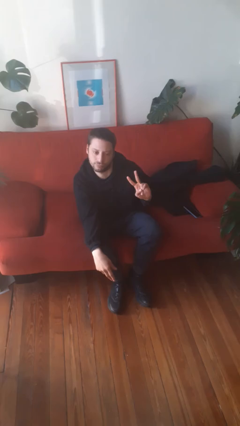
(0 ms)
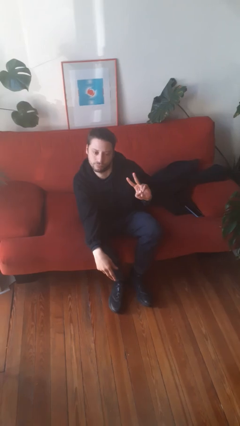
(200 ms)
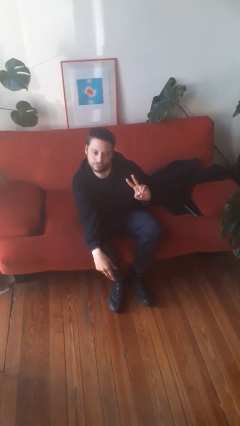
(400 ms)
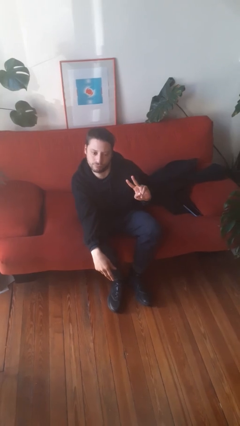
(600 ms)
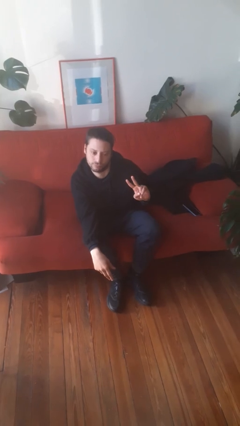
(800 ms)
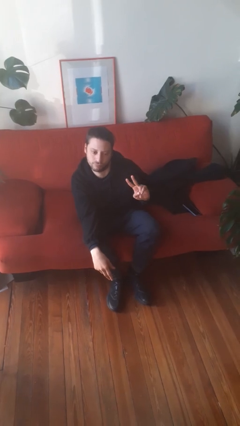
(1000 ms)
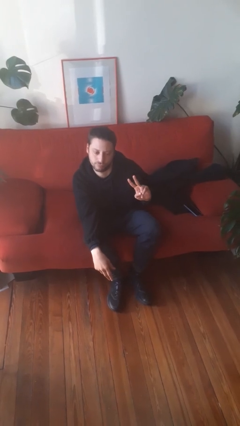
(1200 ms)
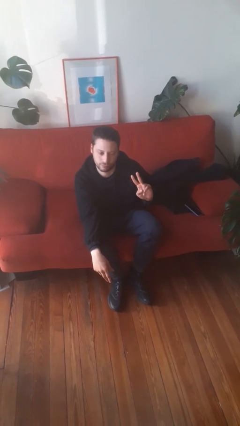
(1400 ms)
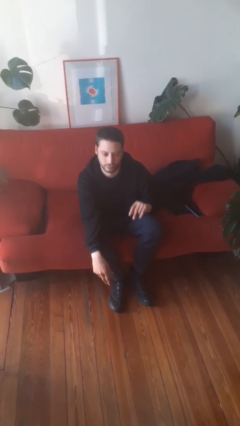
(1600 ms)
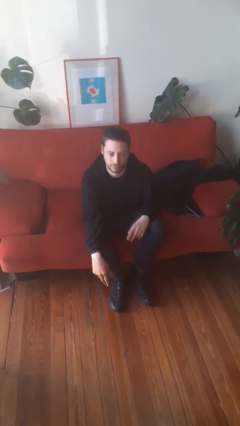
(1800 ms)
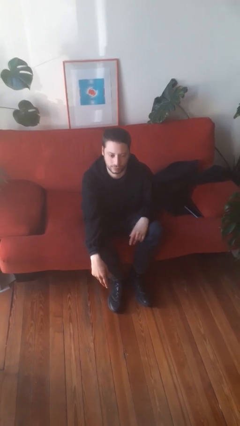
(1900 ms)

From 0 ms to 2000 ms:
person gestures peace

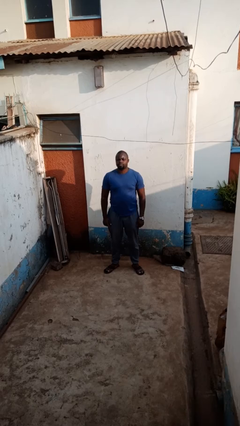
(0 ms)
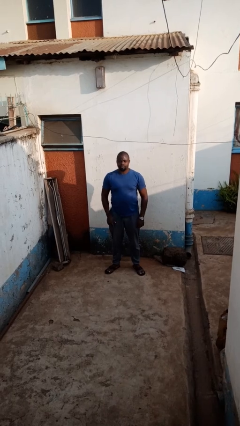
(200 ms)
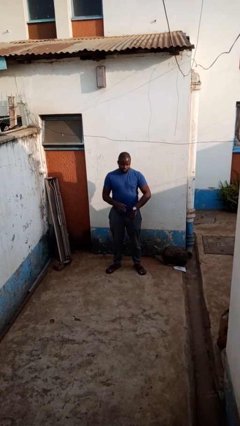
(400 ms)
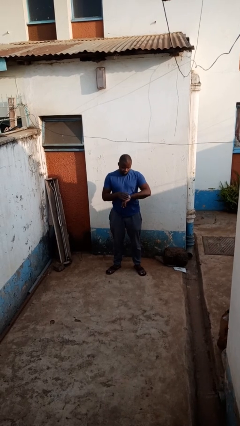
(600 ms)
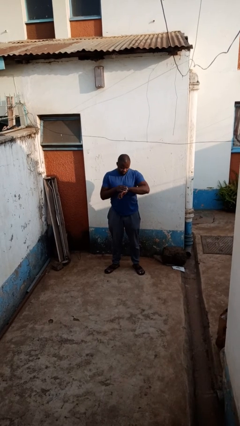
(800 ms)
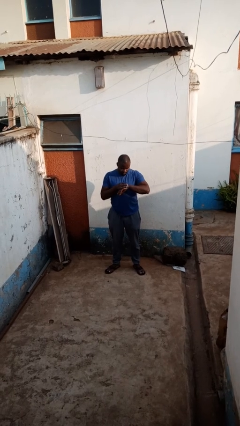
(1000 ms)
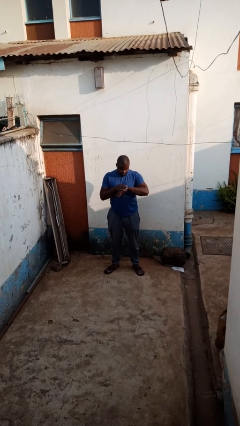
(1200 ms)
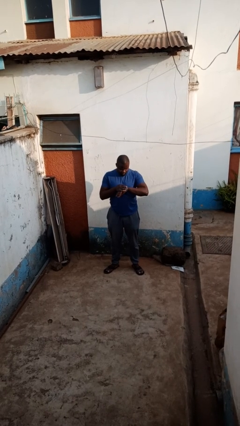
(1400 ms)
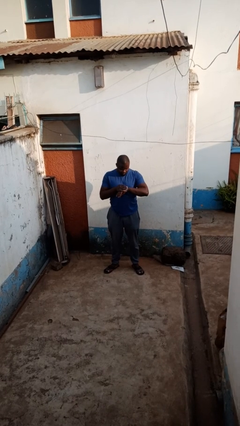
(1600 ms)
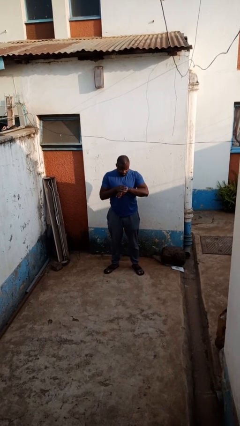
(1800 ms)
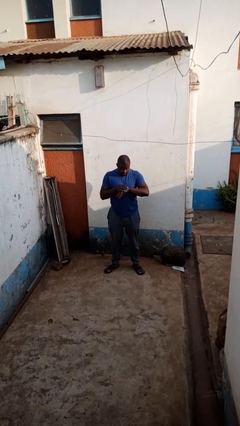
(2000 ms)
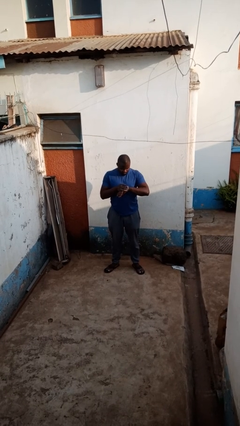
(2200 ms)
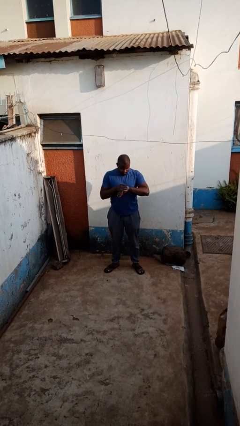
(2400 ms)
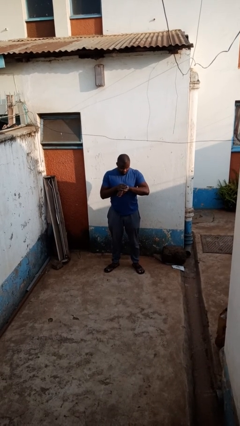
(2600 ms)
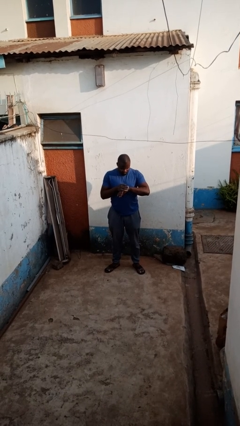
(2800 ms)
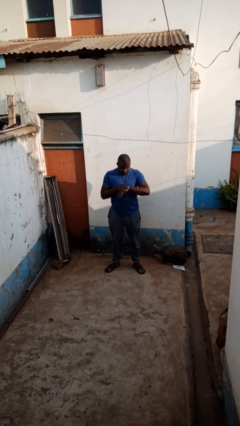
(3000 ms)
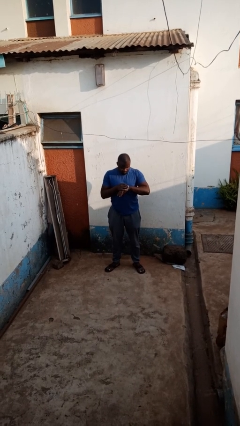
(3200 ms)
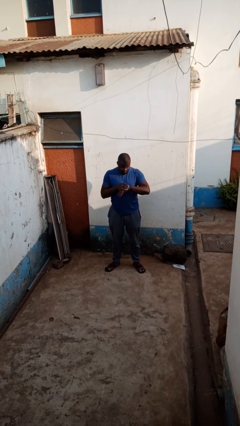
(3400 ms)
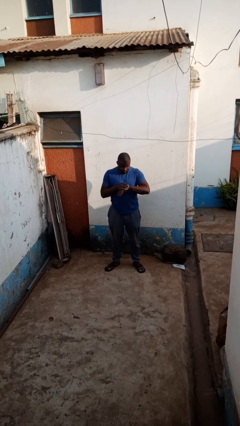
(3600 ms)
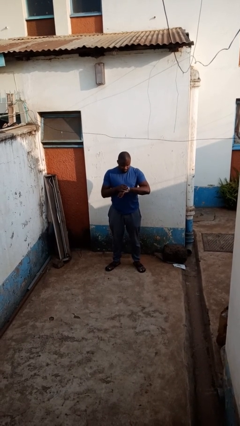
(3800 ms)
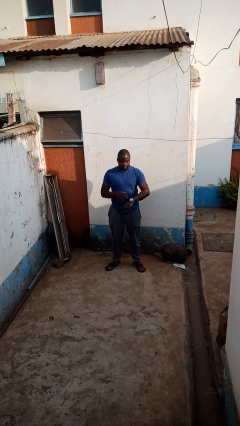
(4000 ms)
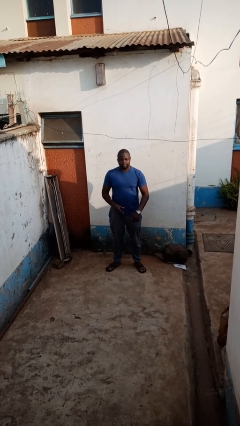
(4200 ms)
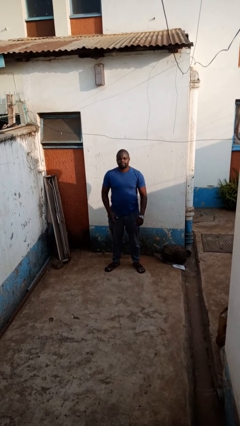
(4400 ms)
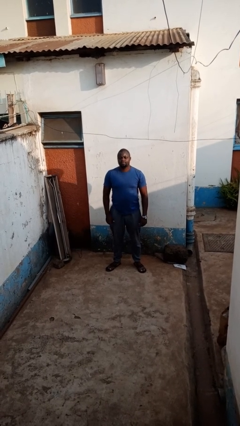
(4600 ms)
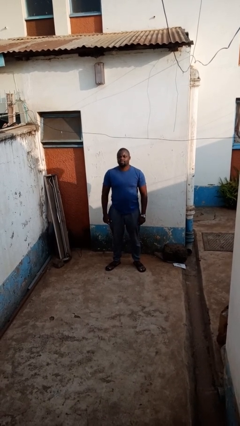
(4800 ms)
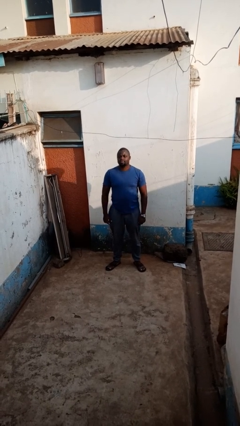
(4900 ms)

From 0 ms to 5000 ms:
person looks at wristwatch

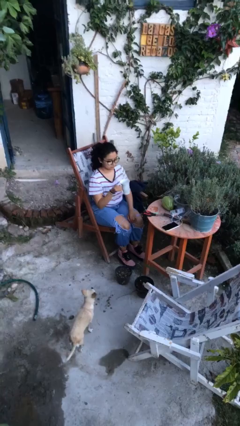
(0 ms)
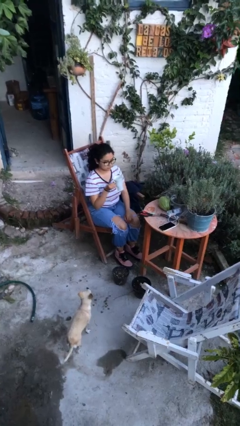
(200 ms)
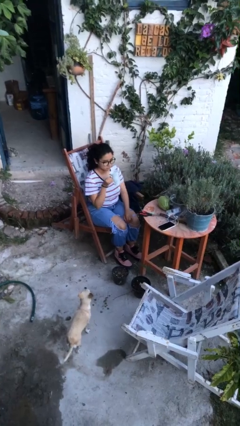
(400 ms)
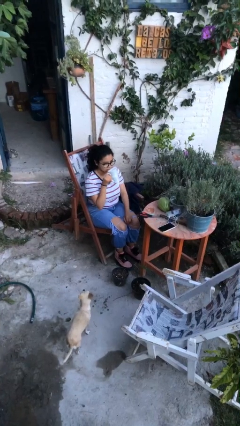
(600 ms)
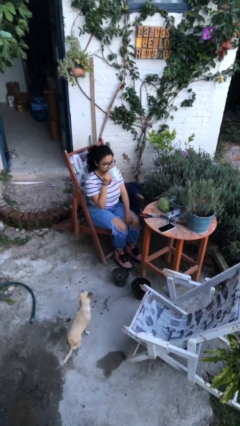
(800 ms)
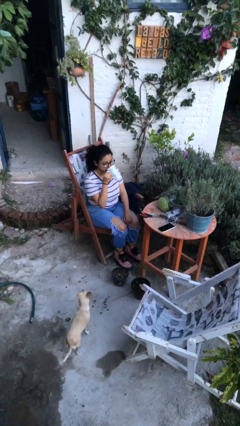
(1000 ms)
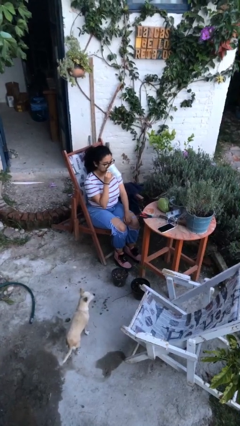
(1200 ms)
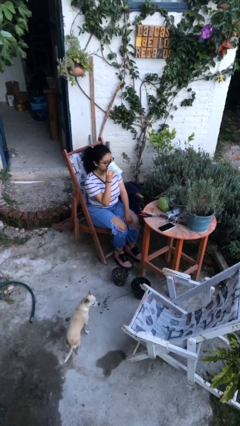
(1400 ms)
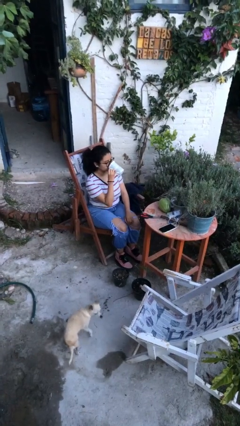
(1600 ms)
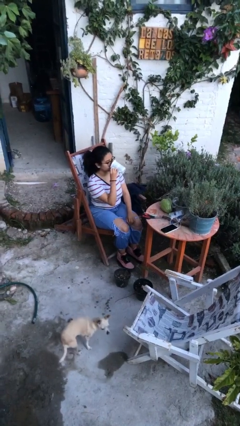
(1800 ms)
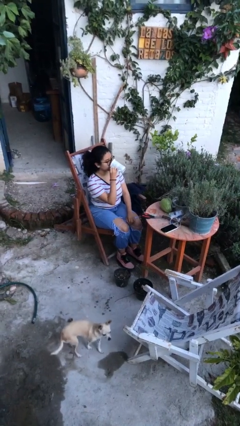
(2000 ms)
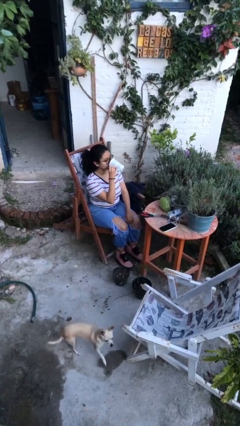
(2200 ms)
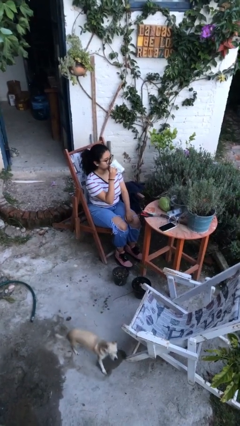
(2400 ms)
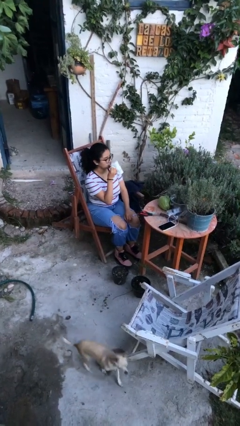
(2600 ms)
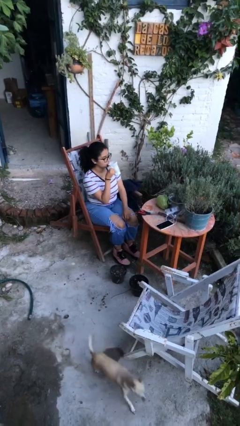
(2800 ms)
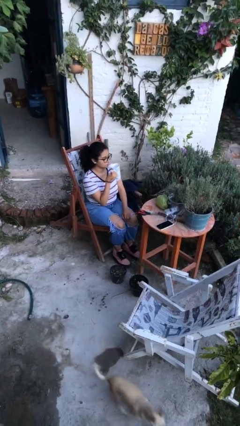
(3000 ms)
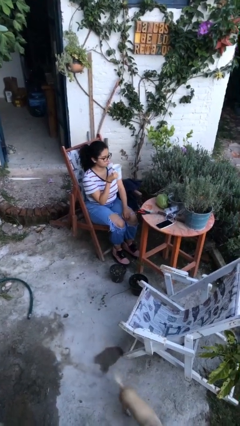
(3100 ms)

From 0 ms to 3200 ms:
person drinks from mug

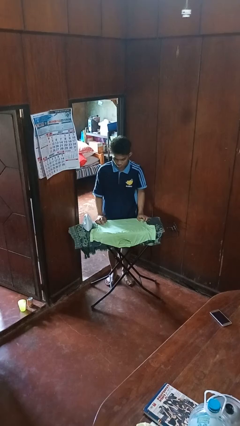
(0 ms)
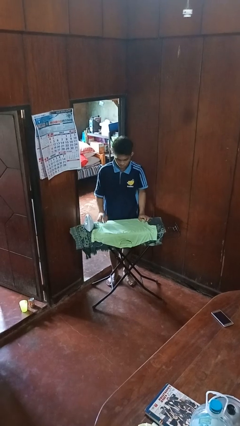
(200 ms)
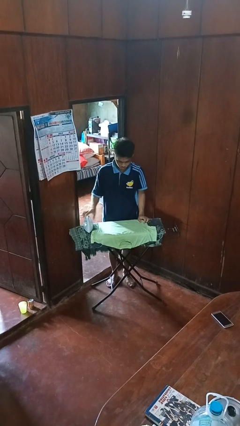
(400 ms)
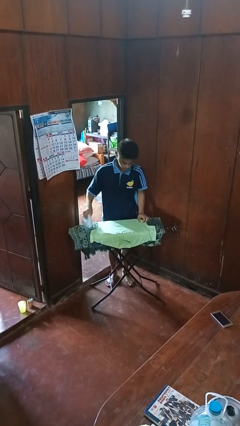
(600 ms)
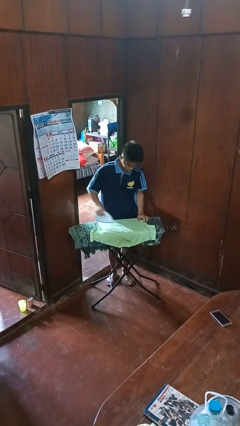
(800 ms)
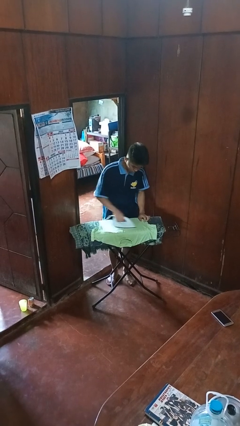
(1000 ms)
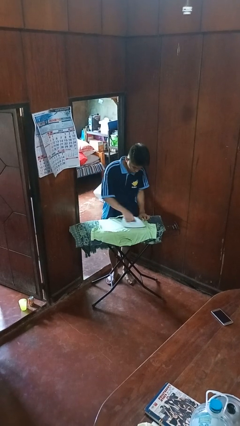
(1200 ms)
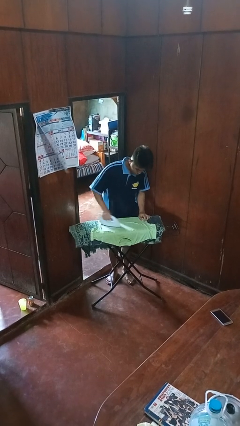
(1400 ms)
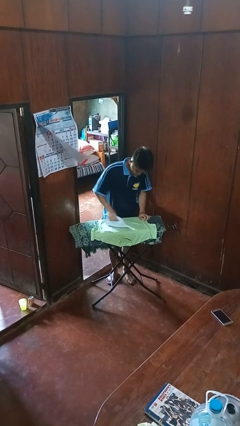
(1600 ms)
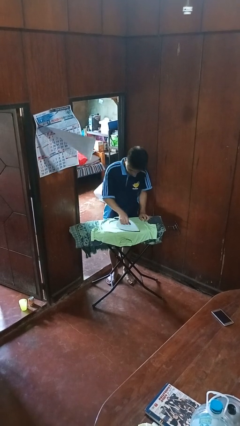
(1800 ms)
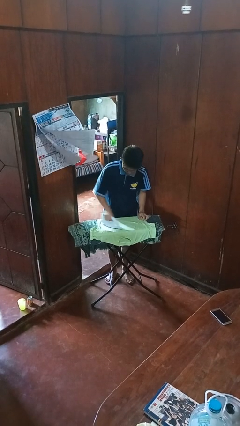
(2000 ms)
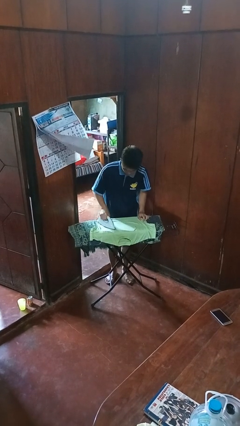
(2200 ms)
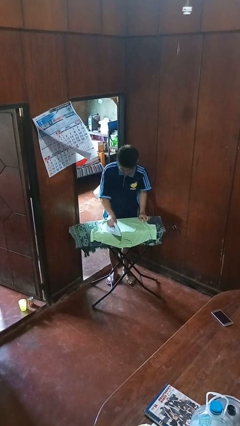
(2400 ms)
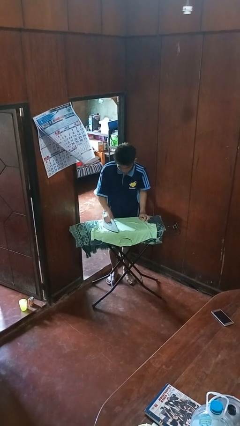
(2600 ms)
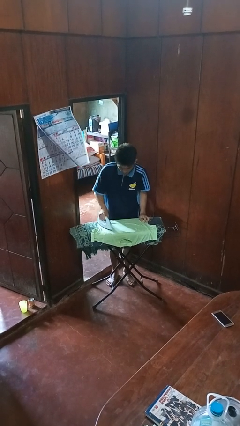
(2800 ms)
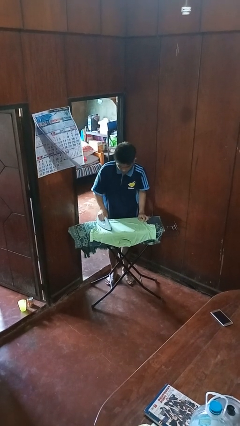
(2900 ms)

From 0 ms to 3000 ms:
person irons clothes

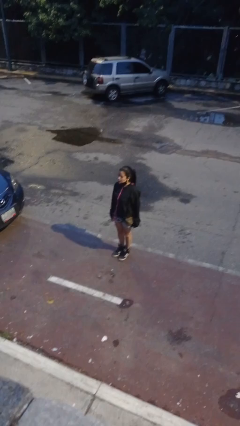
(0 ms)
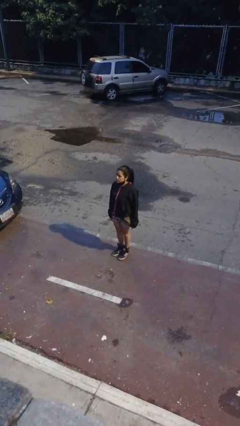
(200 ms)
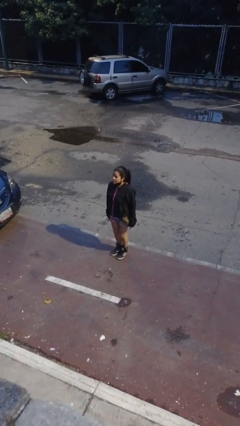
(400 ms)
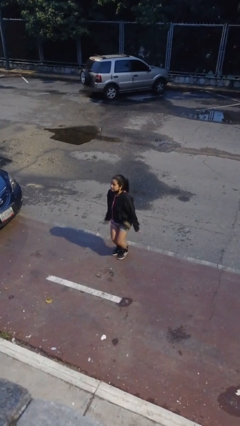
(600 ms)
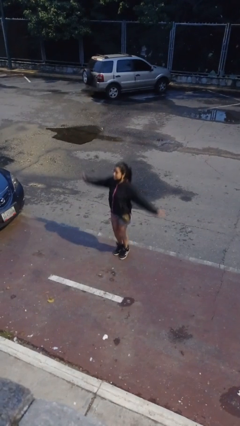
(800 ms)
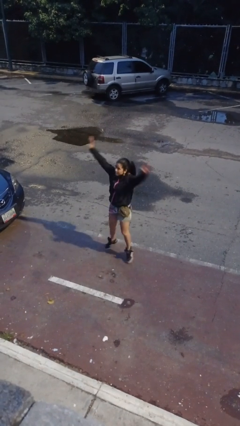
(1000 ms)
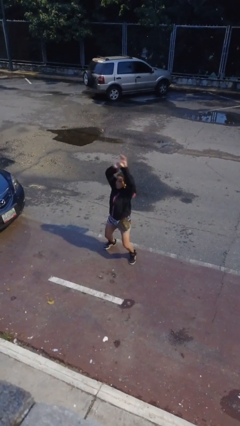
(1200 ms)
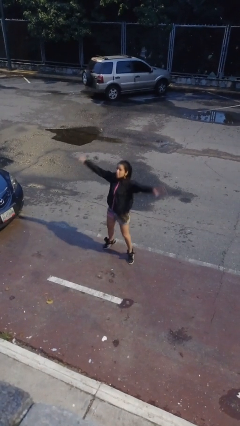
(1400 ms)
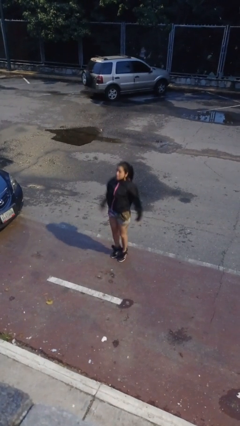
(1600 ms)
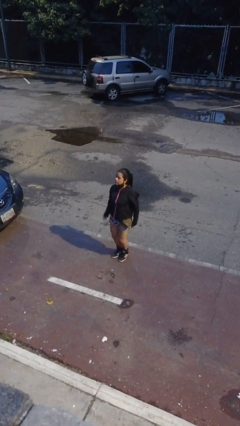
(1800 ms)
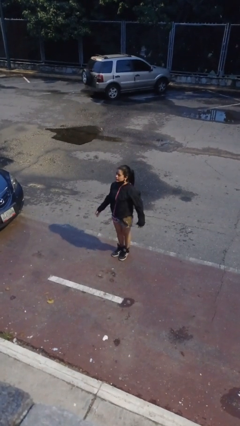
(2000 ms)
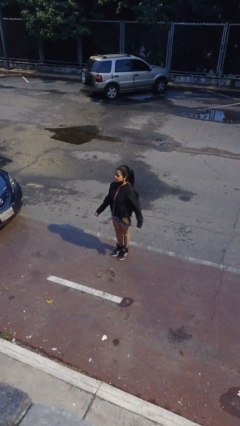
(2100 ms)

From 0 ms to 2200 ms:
person exercises with jumping jacks

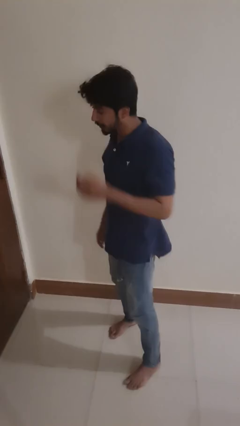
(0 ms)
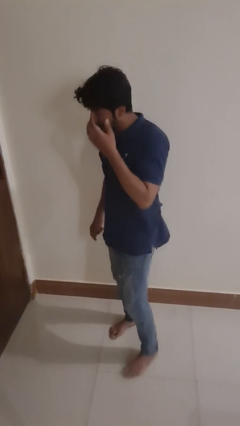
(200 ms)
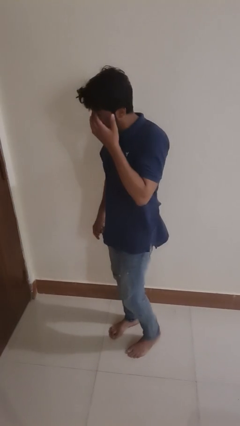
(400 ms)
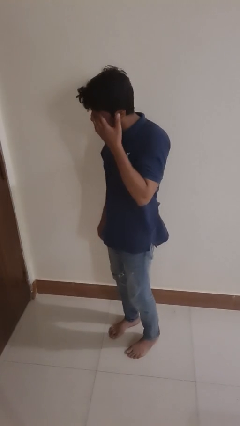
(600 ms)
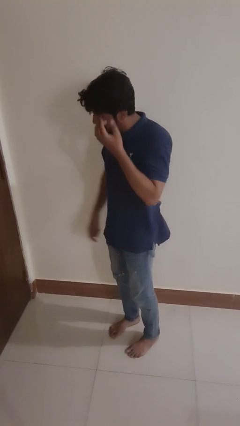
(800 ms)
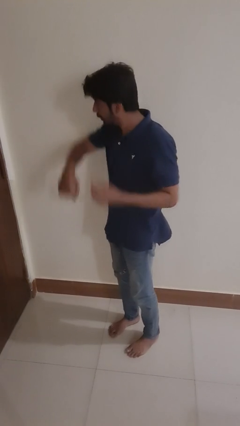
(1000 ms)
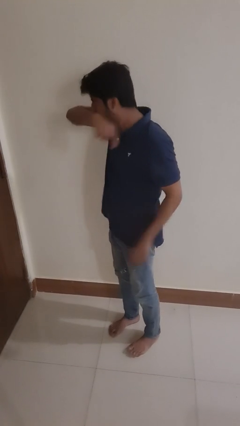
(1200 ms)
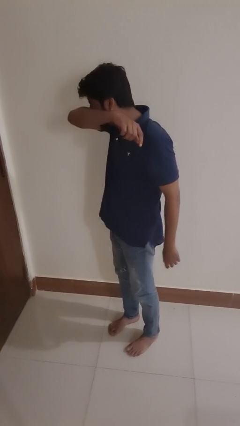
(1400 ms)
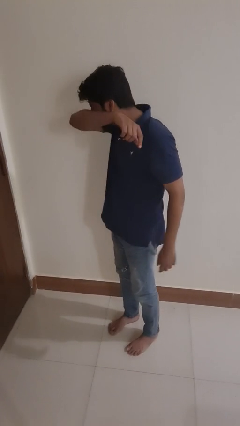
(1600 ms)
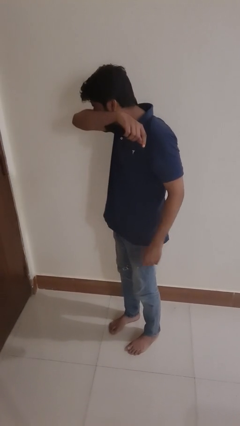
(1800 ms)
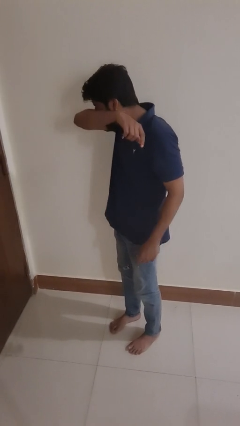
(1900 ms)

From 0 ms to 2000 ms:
person sneezes into arm

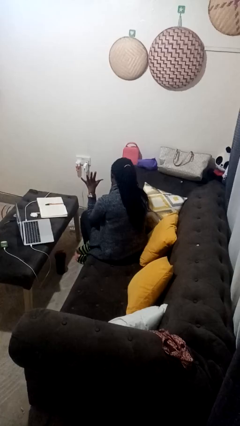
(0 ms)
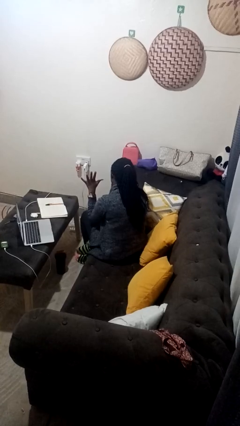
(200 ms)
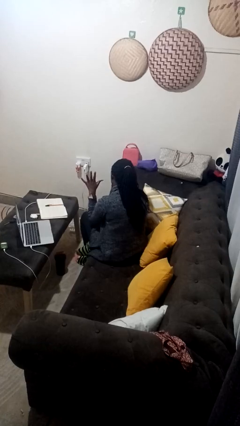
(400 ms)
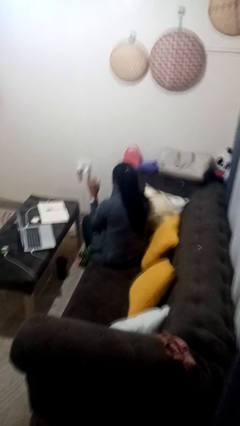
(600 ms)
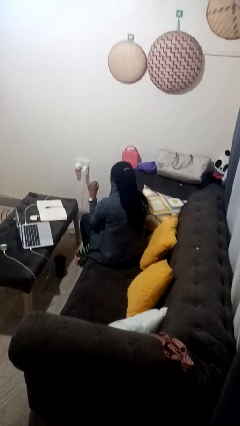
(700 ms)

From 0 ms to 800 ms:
person gestures number five
